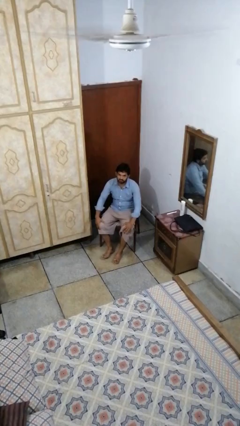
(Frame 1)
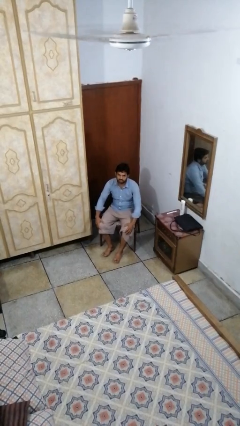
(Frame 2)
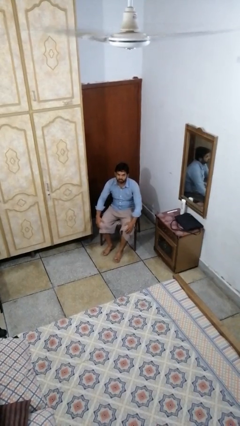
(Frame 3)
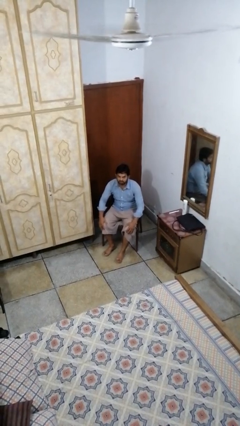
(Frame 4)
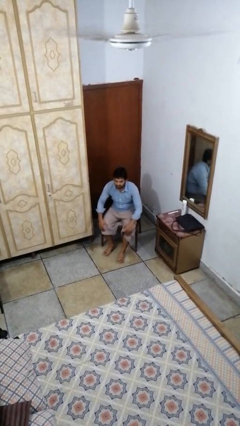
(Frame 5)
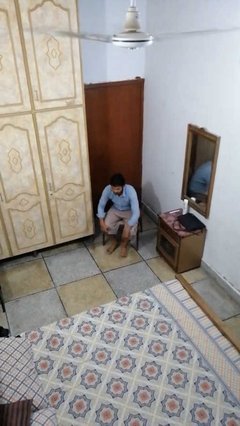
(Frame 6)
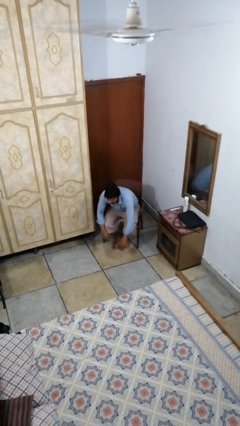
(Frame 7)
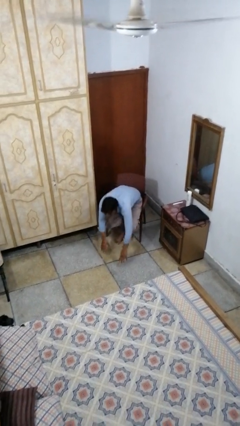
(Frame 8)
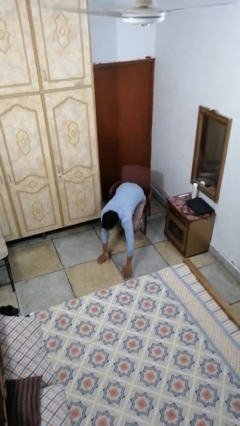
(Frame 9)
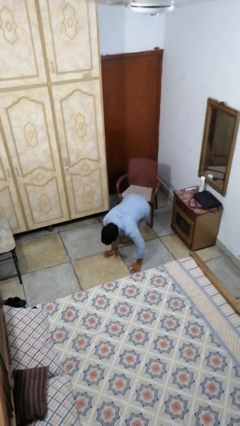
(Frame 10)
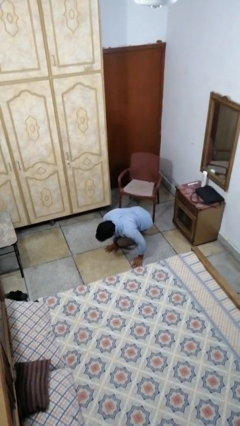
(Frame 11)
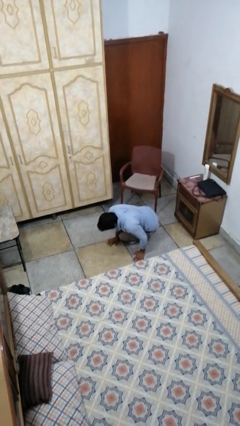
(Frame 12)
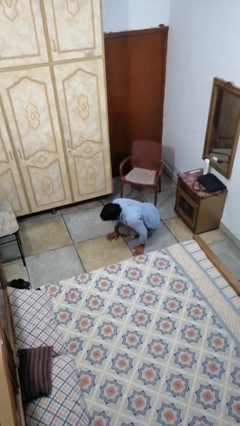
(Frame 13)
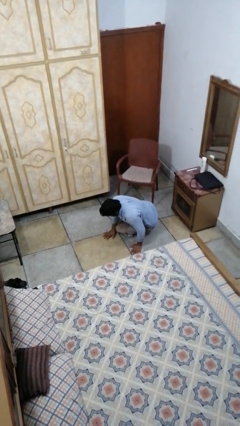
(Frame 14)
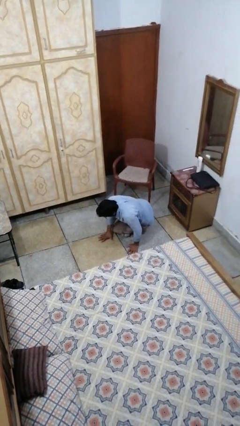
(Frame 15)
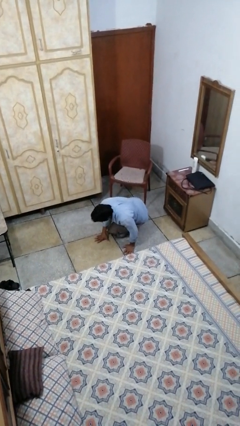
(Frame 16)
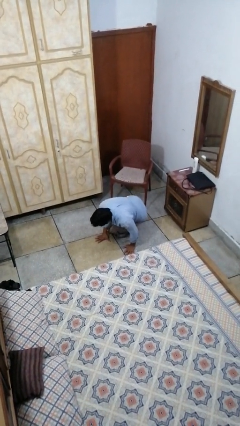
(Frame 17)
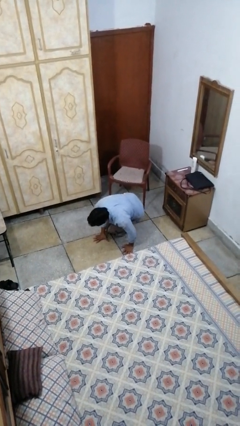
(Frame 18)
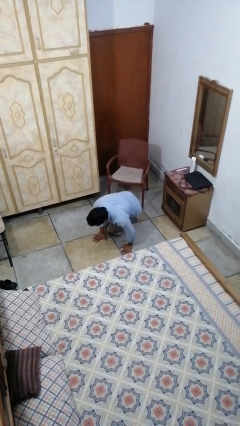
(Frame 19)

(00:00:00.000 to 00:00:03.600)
person falls from chair

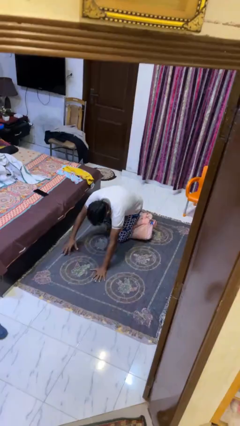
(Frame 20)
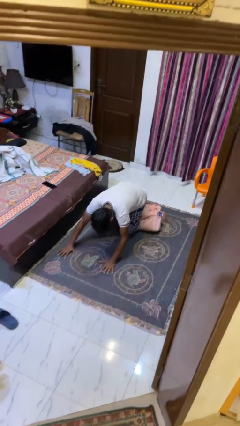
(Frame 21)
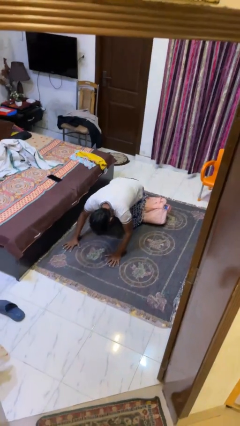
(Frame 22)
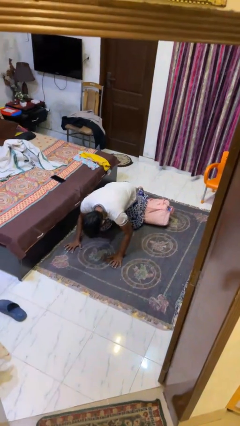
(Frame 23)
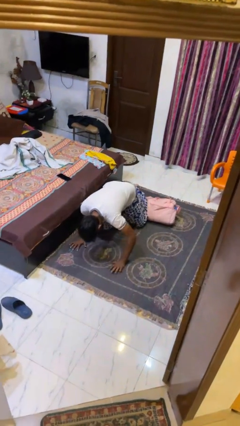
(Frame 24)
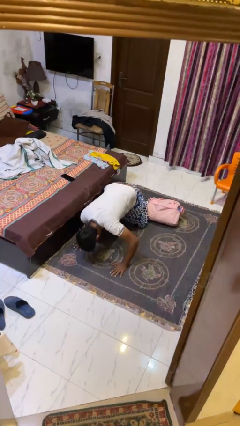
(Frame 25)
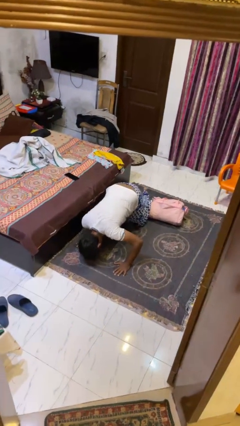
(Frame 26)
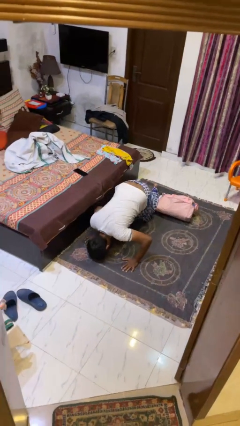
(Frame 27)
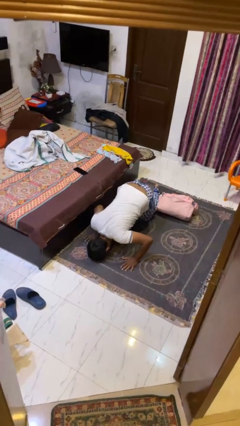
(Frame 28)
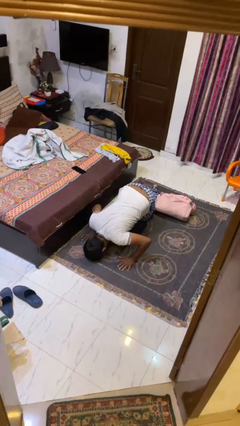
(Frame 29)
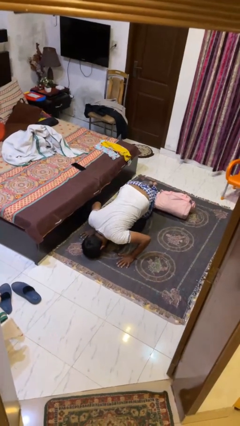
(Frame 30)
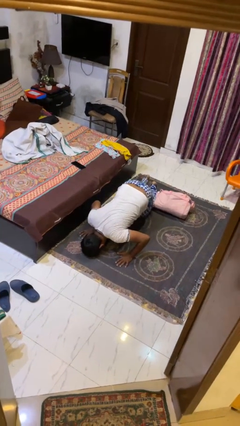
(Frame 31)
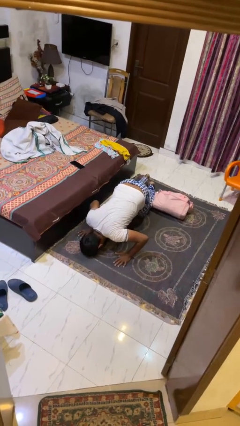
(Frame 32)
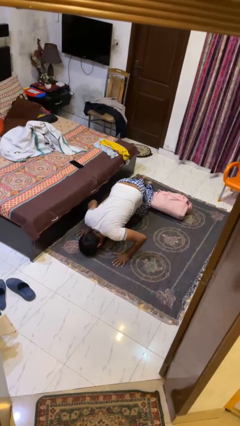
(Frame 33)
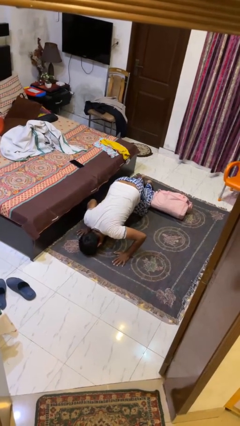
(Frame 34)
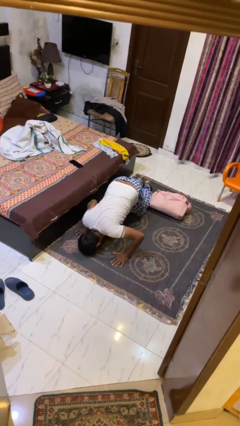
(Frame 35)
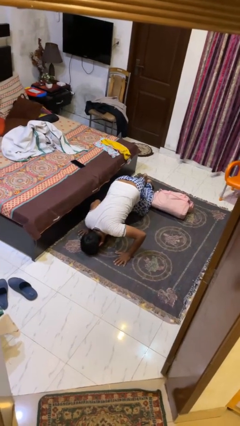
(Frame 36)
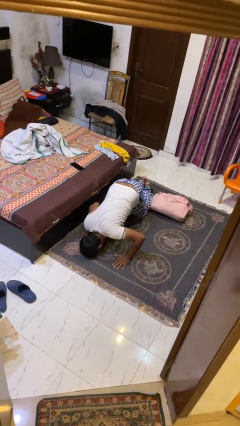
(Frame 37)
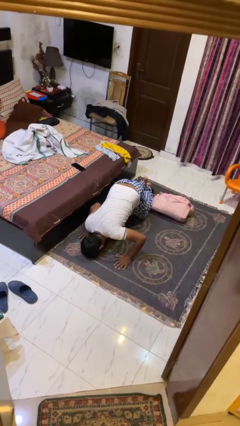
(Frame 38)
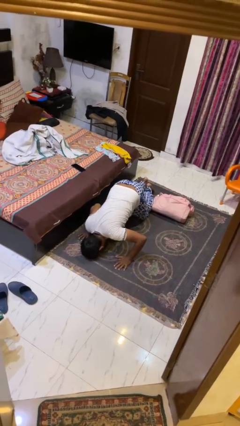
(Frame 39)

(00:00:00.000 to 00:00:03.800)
person lies down on floor

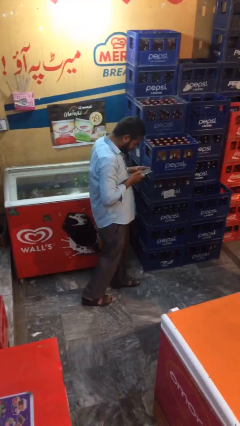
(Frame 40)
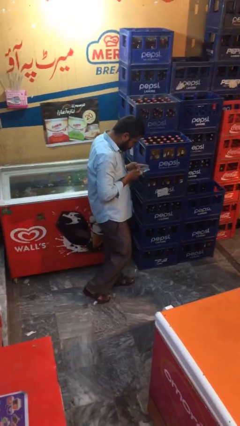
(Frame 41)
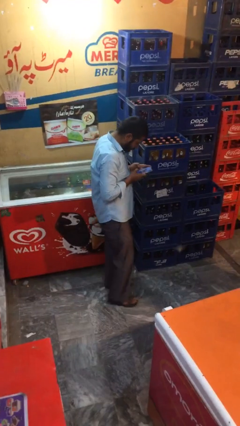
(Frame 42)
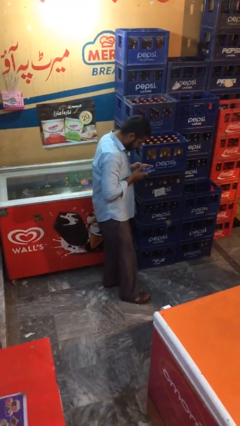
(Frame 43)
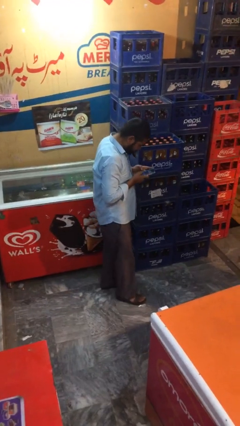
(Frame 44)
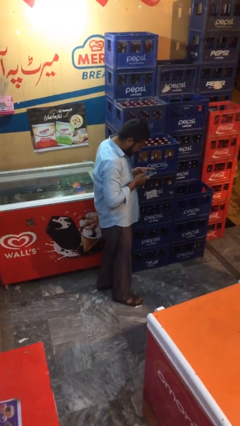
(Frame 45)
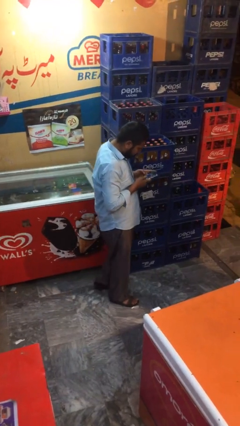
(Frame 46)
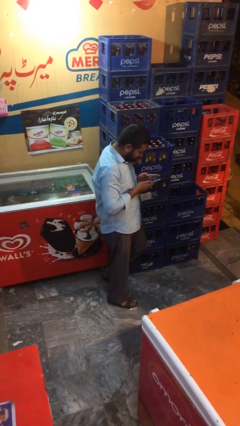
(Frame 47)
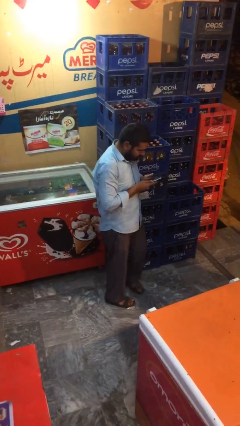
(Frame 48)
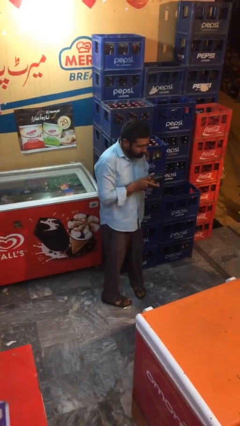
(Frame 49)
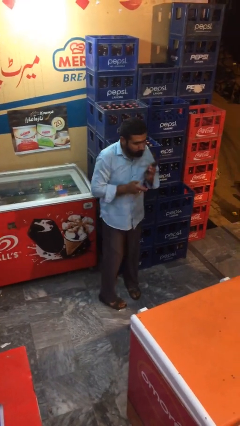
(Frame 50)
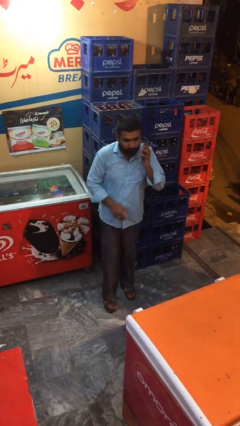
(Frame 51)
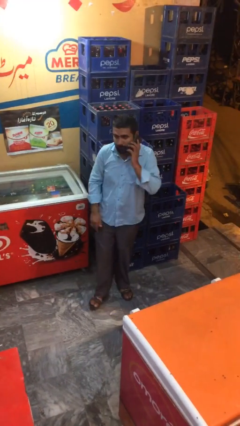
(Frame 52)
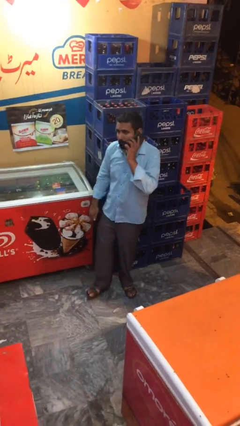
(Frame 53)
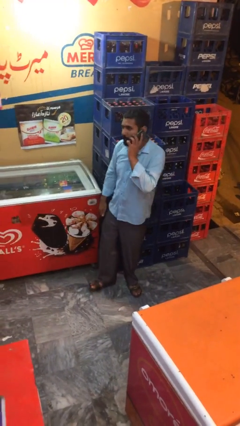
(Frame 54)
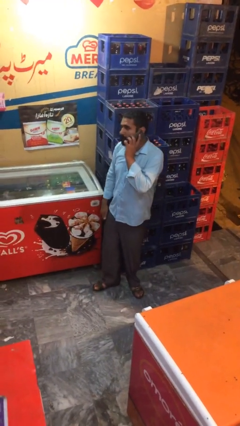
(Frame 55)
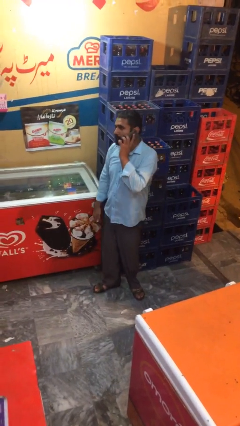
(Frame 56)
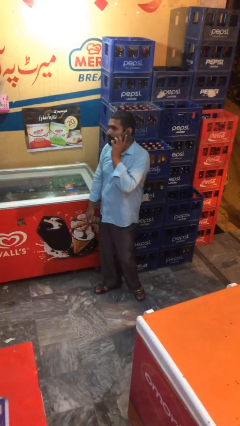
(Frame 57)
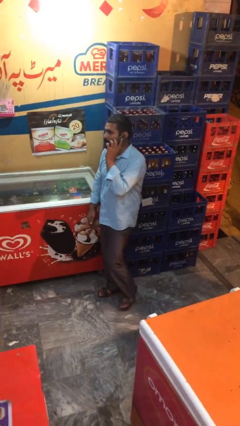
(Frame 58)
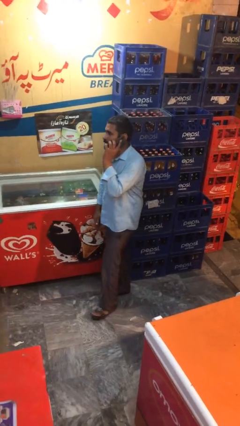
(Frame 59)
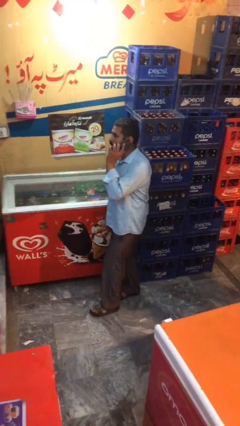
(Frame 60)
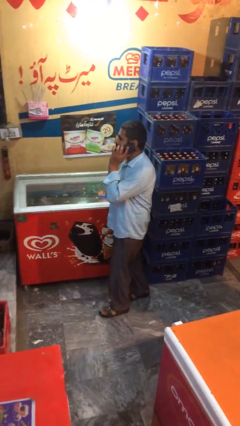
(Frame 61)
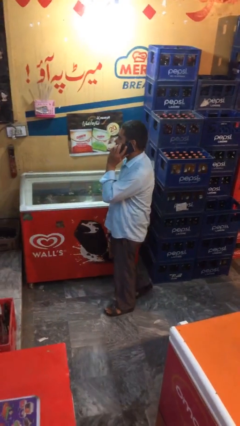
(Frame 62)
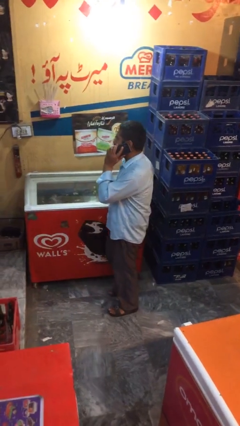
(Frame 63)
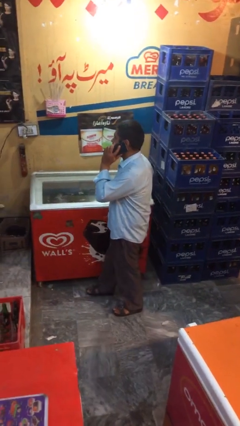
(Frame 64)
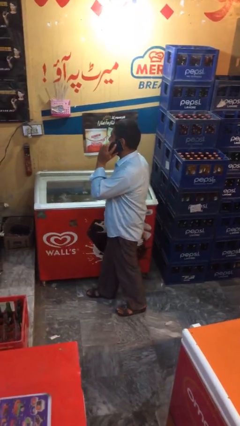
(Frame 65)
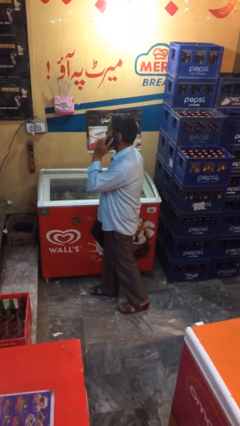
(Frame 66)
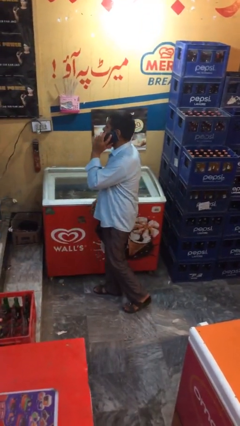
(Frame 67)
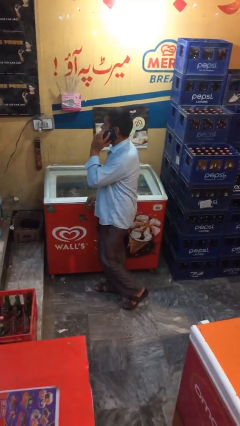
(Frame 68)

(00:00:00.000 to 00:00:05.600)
person talks on phone

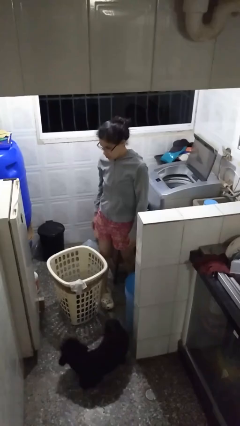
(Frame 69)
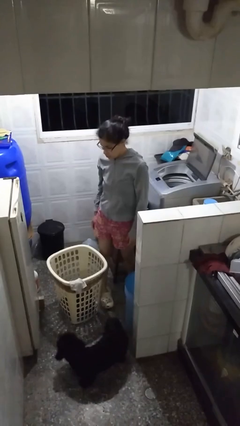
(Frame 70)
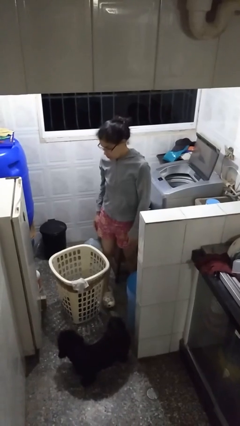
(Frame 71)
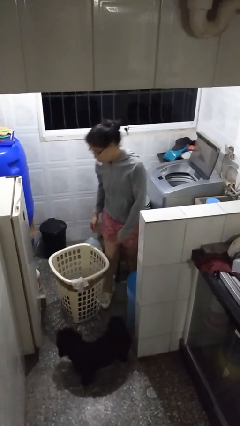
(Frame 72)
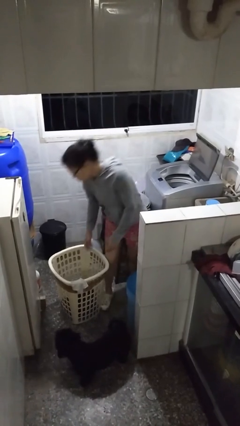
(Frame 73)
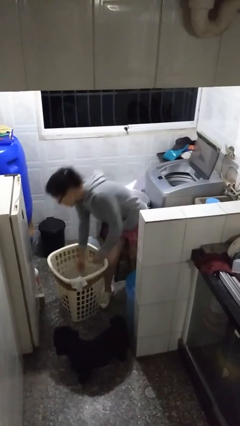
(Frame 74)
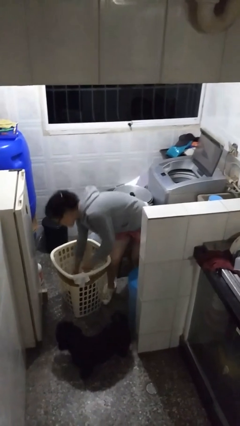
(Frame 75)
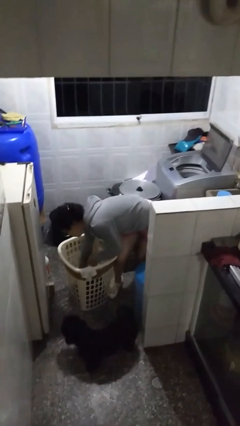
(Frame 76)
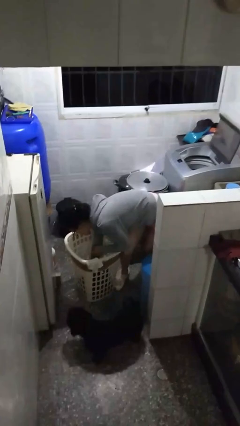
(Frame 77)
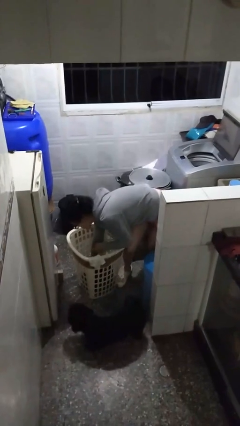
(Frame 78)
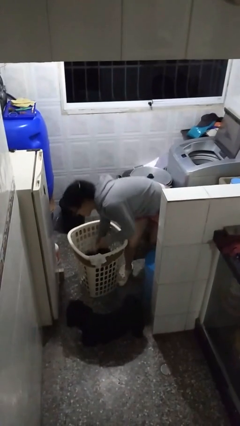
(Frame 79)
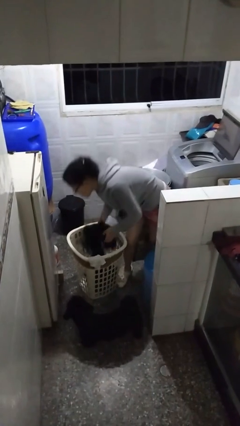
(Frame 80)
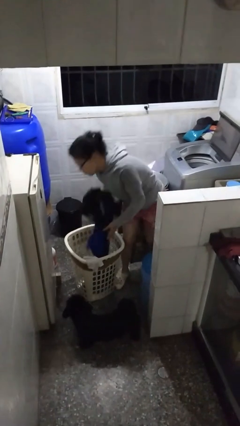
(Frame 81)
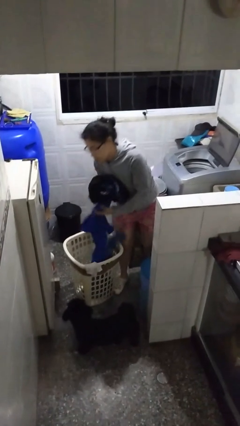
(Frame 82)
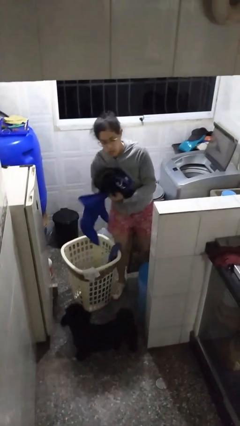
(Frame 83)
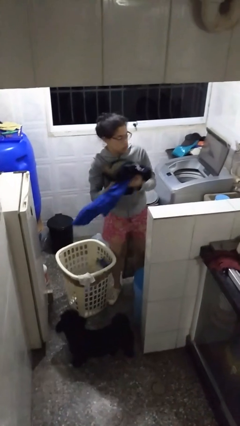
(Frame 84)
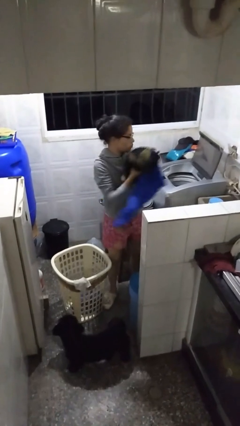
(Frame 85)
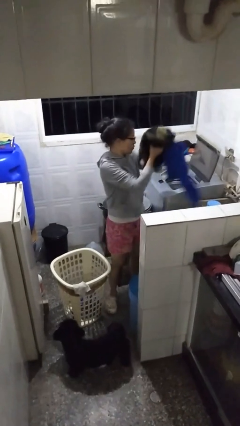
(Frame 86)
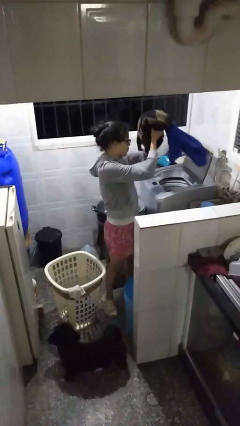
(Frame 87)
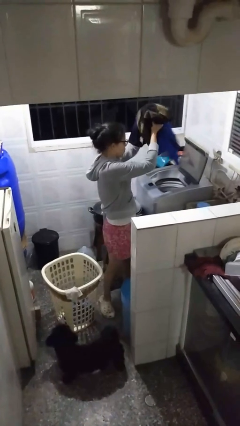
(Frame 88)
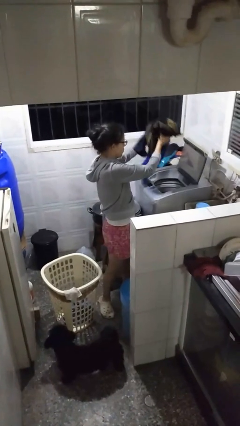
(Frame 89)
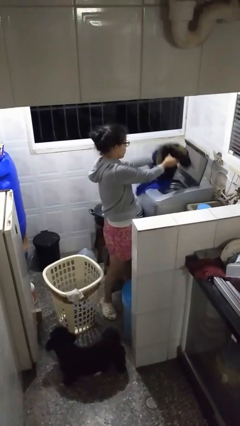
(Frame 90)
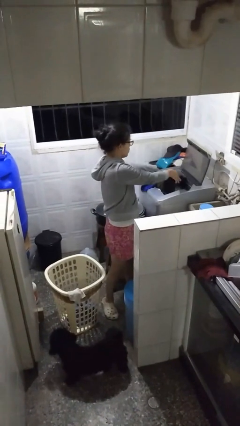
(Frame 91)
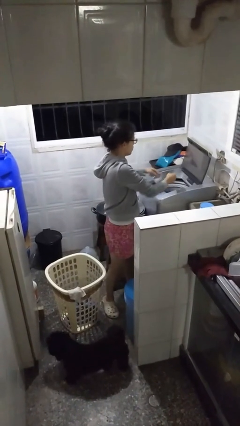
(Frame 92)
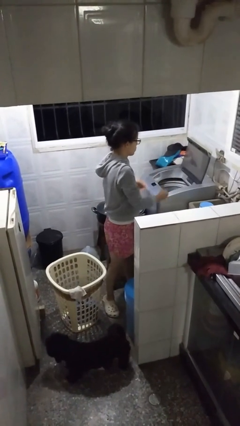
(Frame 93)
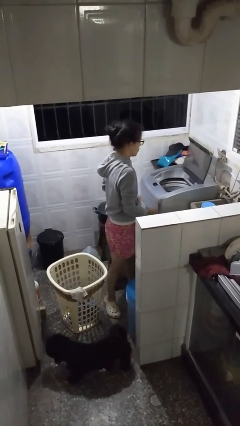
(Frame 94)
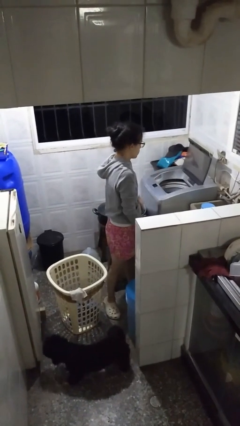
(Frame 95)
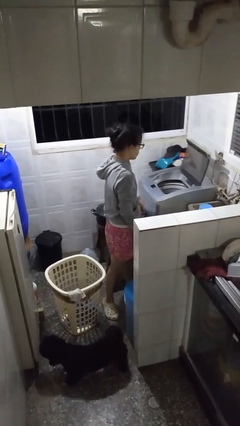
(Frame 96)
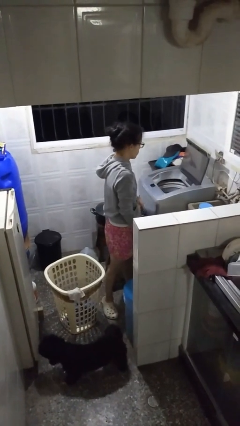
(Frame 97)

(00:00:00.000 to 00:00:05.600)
person loads clotheswasher
